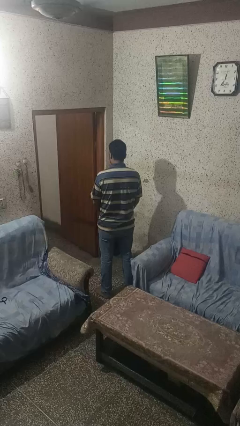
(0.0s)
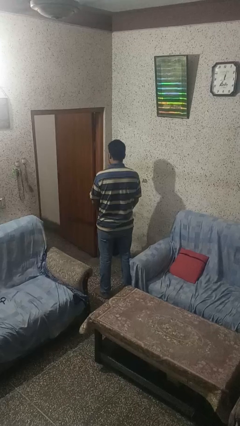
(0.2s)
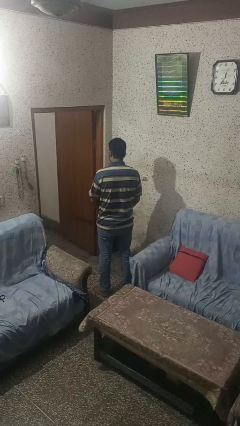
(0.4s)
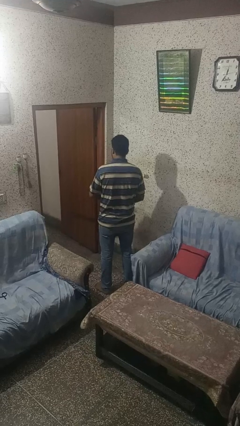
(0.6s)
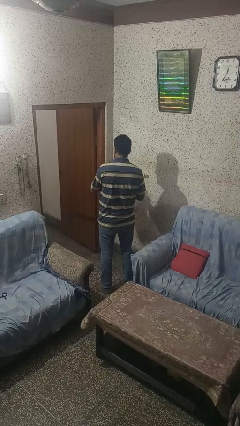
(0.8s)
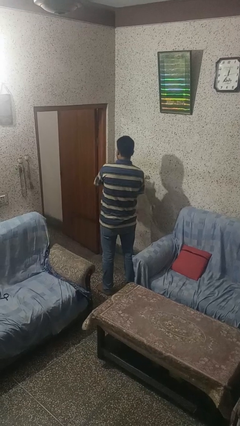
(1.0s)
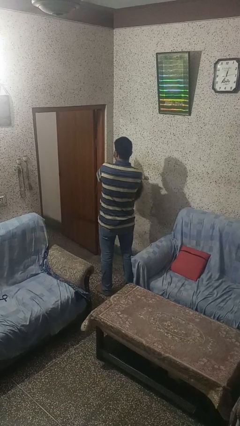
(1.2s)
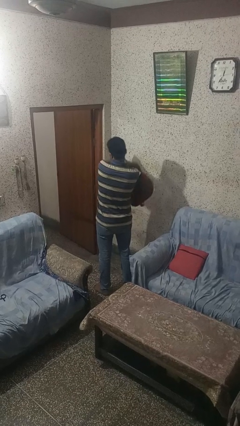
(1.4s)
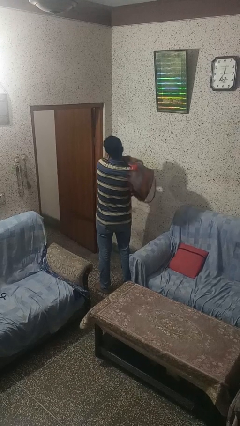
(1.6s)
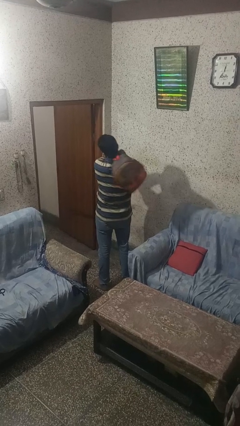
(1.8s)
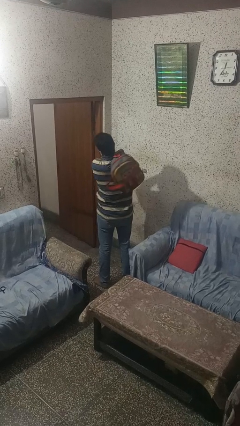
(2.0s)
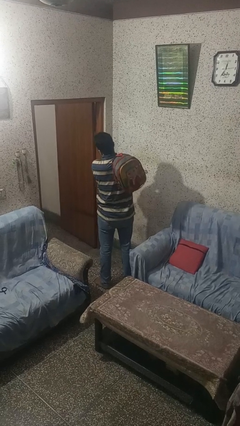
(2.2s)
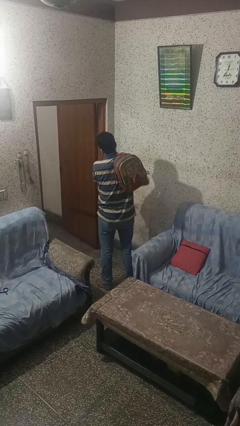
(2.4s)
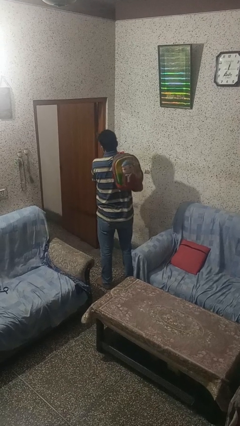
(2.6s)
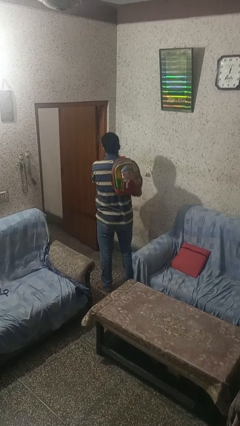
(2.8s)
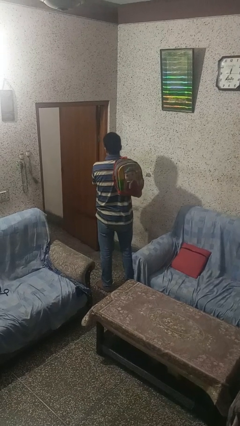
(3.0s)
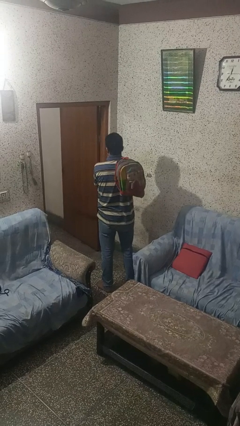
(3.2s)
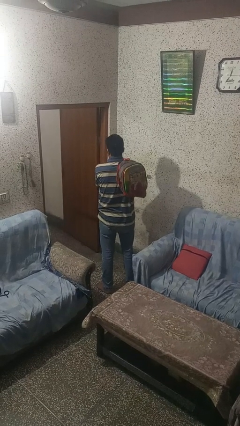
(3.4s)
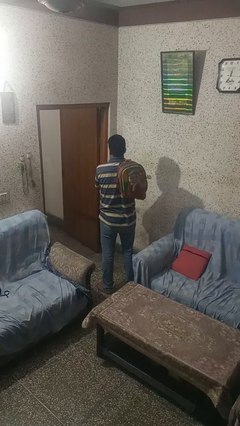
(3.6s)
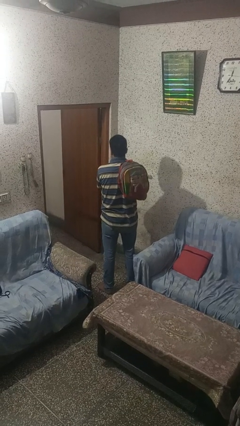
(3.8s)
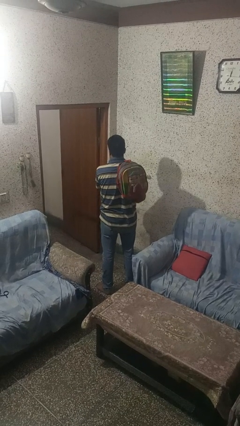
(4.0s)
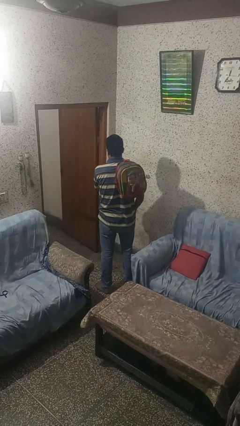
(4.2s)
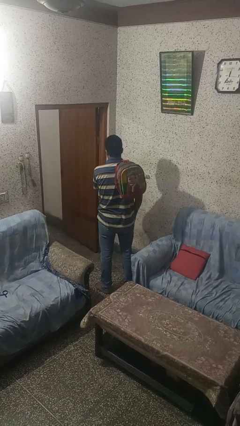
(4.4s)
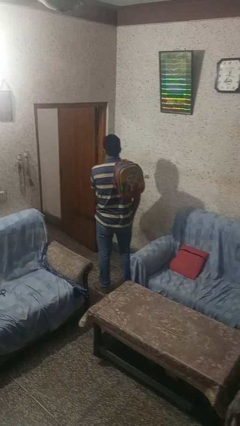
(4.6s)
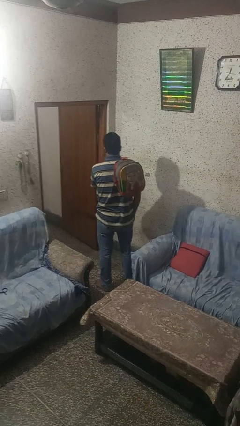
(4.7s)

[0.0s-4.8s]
person puts on backpack

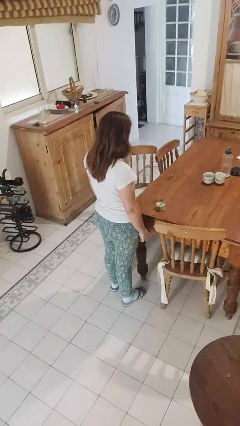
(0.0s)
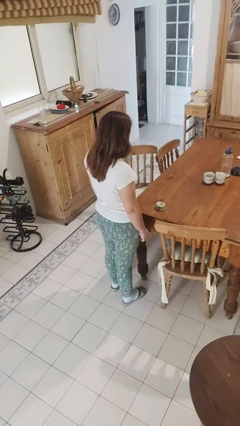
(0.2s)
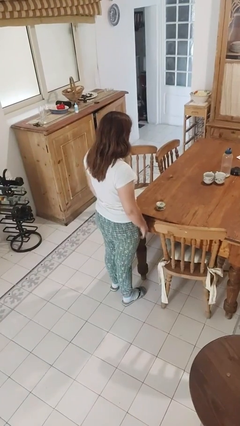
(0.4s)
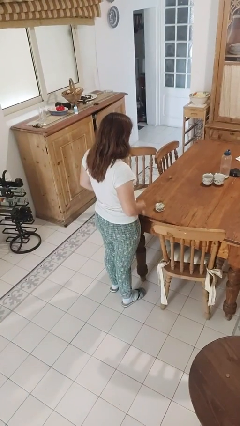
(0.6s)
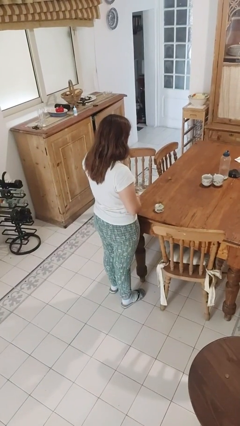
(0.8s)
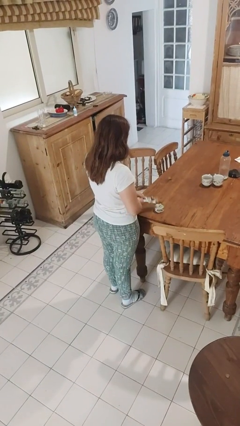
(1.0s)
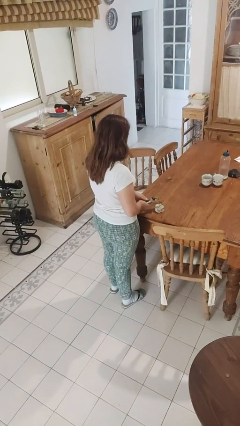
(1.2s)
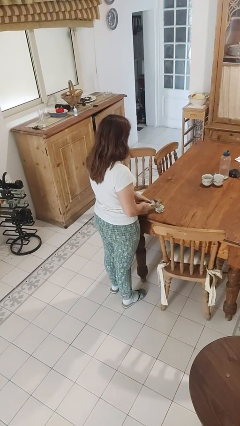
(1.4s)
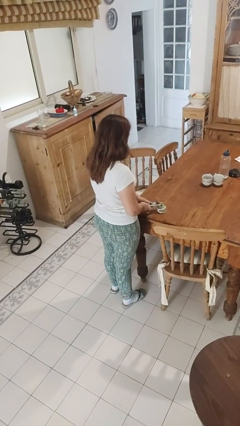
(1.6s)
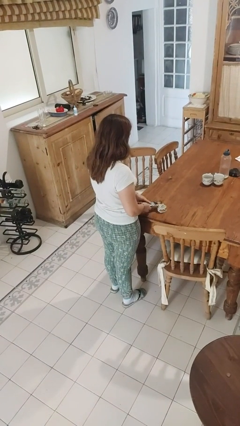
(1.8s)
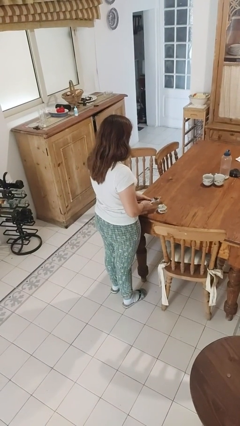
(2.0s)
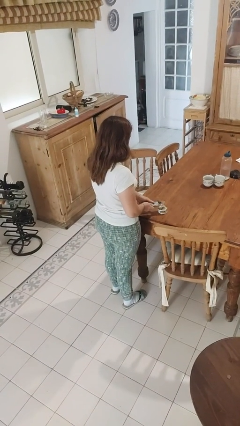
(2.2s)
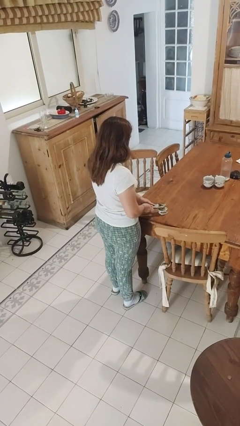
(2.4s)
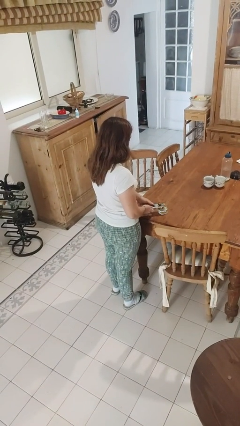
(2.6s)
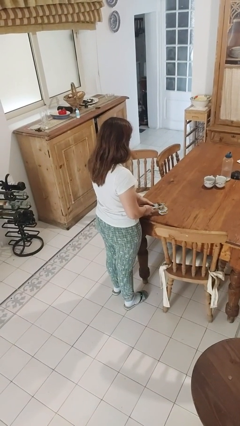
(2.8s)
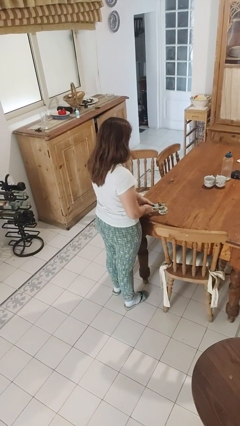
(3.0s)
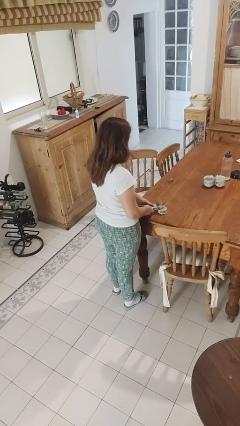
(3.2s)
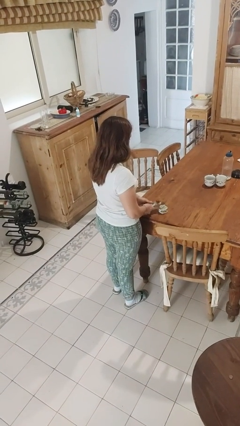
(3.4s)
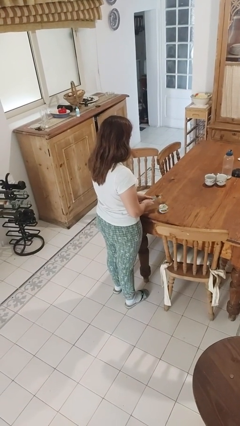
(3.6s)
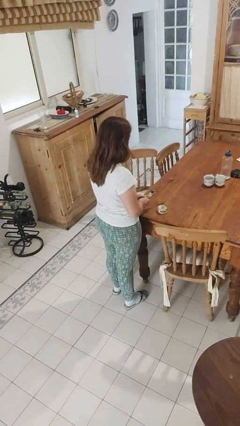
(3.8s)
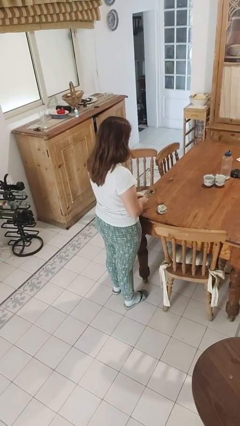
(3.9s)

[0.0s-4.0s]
person opens can with can opener

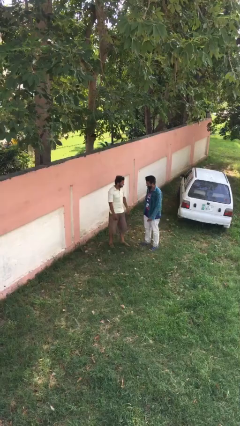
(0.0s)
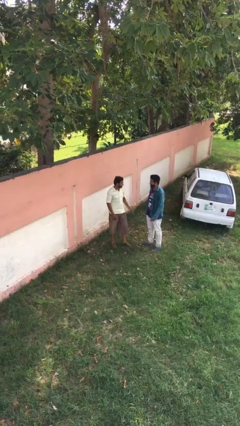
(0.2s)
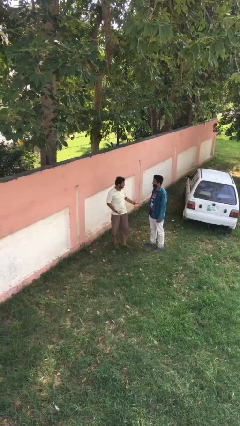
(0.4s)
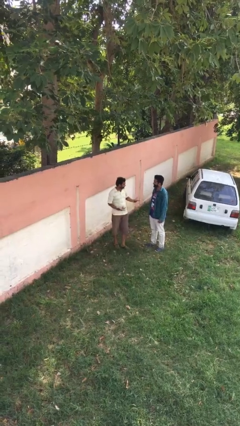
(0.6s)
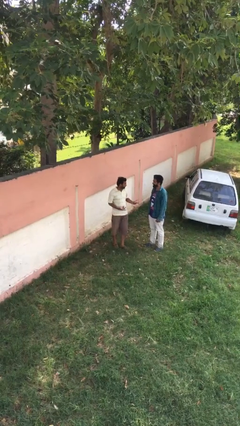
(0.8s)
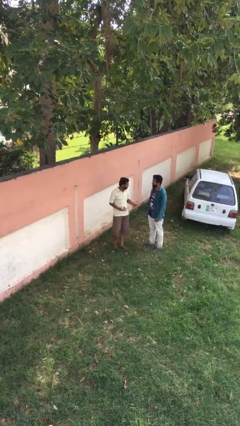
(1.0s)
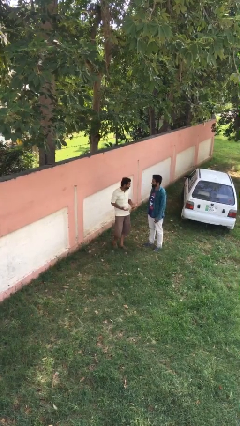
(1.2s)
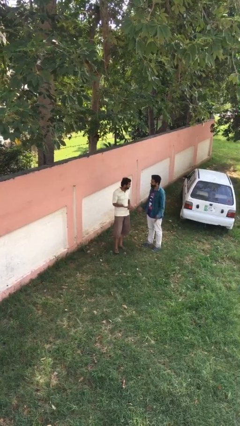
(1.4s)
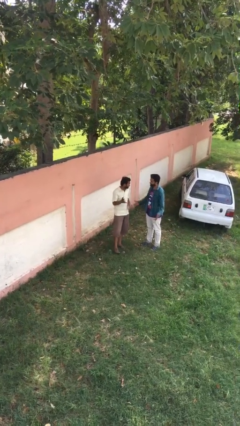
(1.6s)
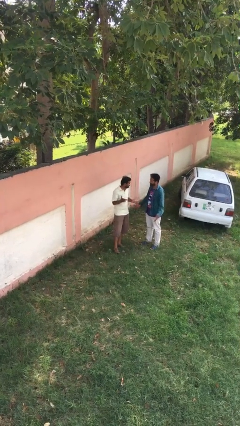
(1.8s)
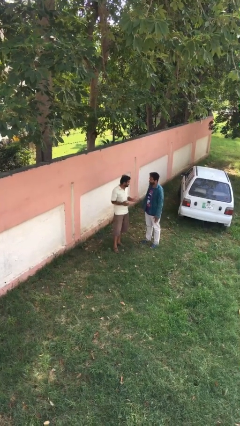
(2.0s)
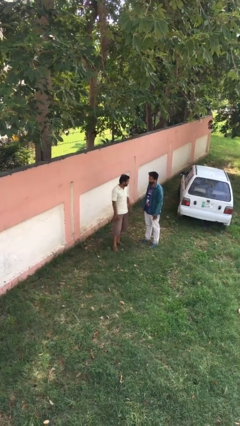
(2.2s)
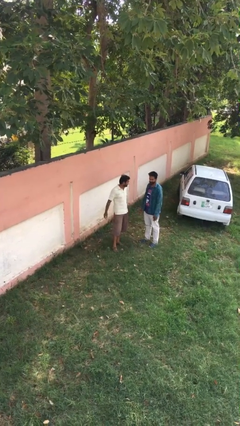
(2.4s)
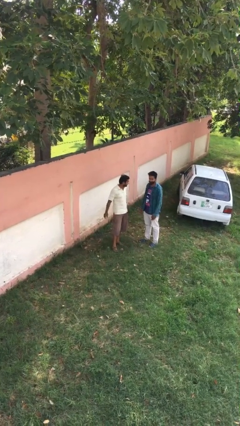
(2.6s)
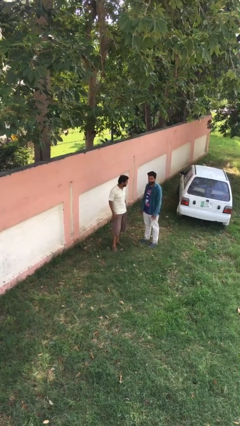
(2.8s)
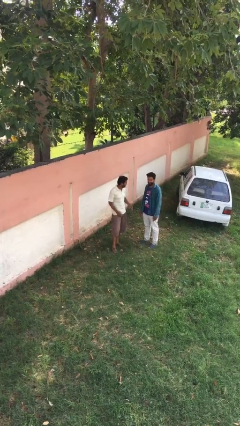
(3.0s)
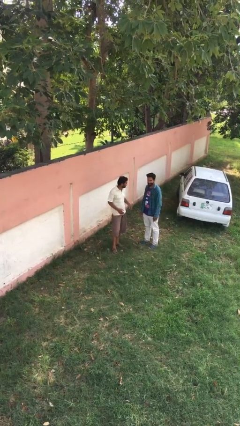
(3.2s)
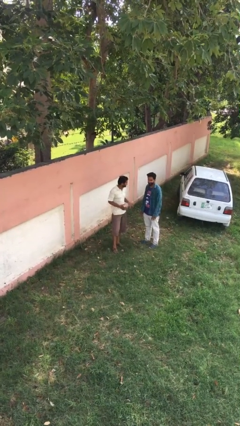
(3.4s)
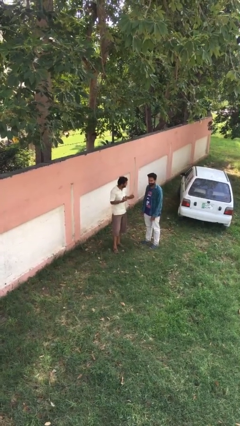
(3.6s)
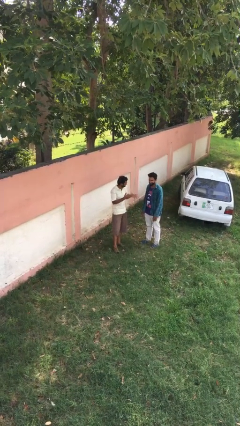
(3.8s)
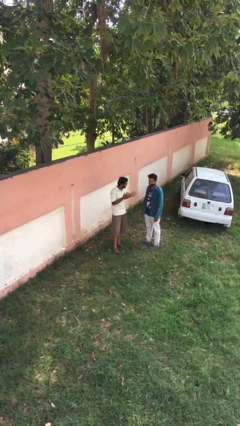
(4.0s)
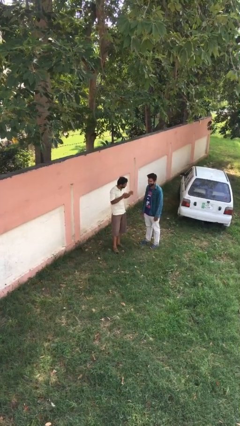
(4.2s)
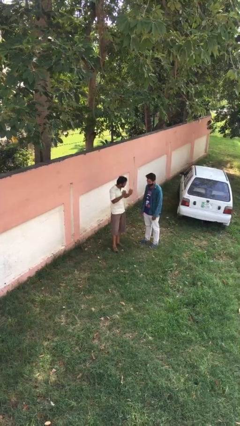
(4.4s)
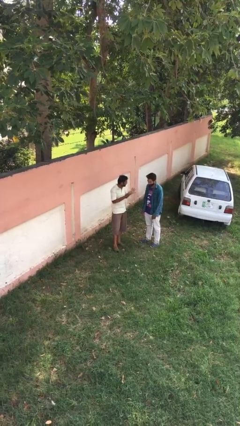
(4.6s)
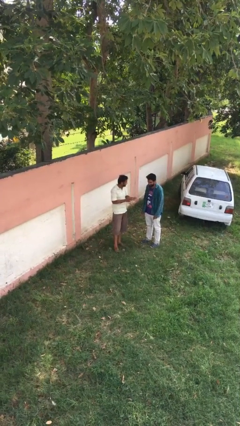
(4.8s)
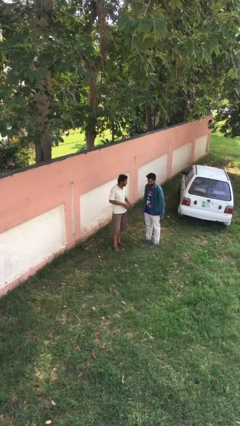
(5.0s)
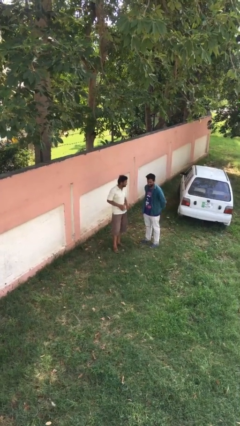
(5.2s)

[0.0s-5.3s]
person talks to person

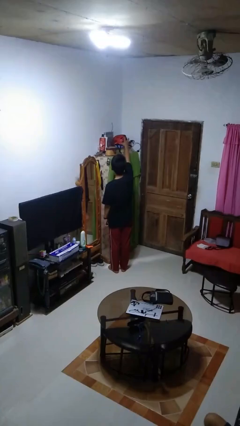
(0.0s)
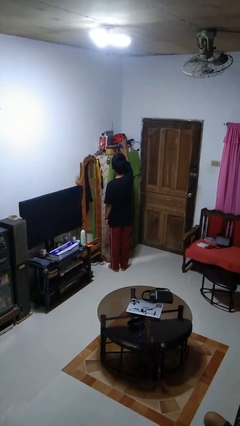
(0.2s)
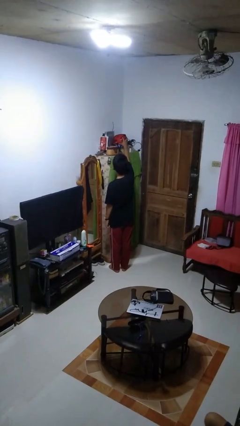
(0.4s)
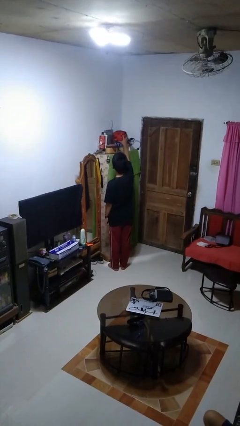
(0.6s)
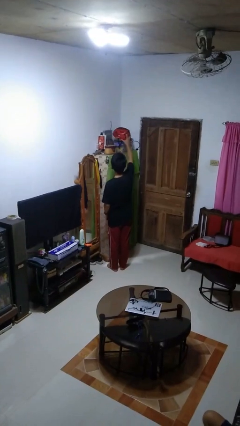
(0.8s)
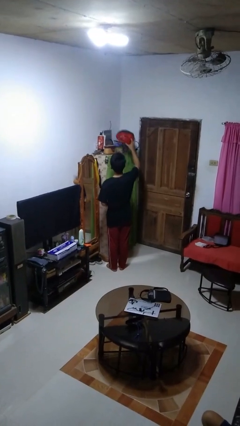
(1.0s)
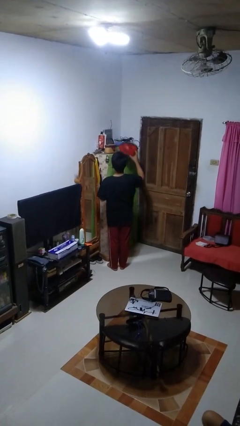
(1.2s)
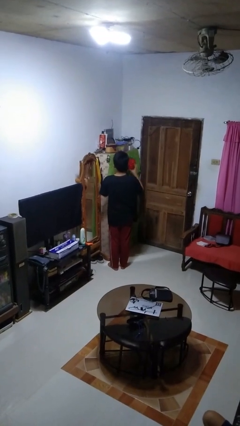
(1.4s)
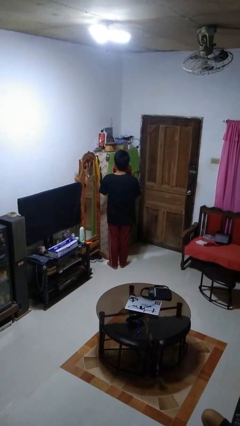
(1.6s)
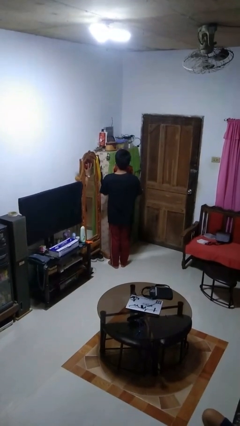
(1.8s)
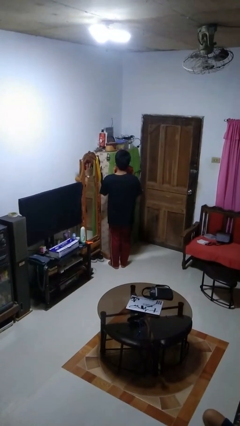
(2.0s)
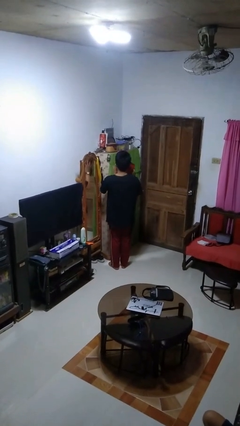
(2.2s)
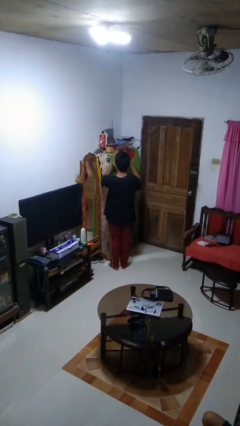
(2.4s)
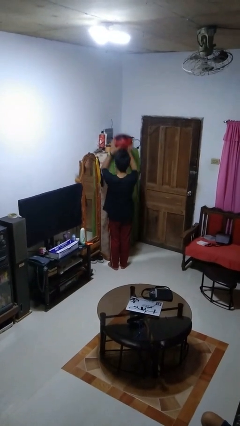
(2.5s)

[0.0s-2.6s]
person picks up object from shelf

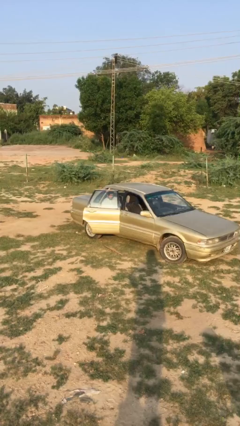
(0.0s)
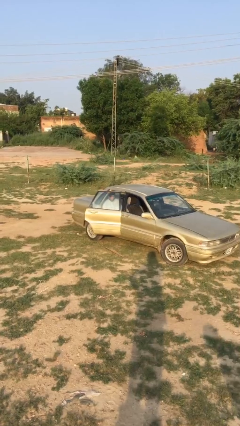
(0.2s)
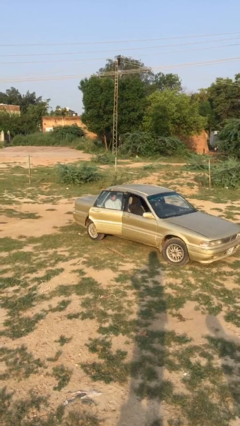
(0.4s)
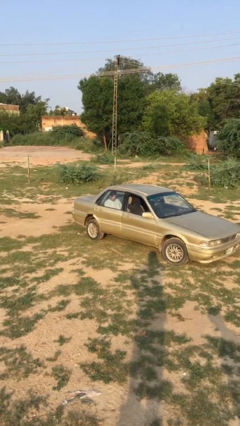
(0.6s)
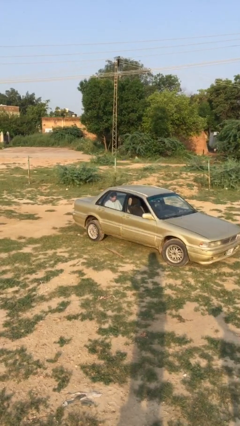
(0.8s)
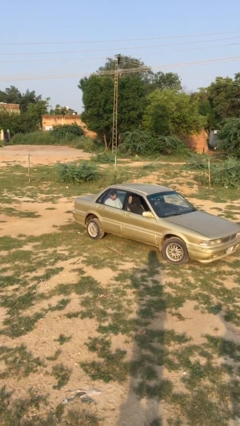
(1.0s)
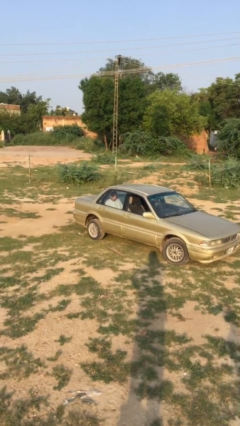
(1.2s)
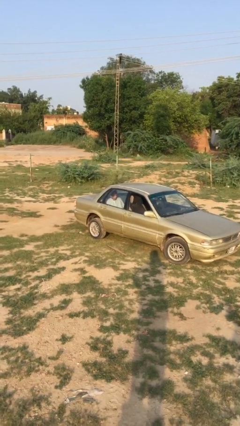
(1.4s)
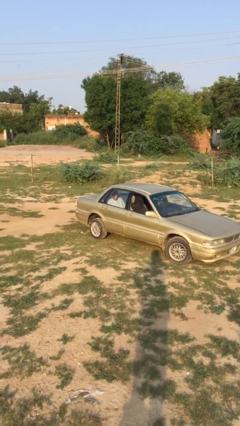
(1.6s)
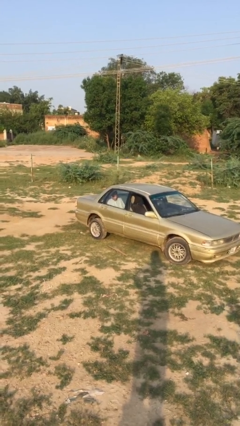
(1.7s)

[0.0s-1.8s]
person closes car door
